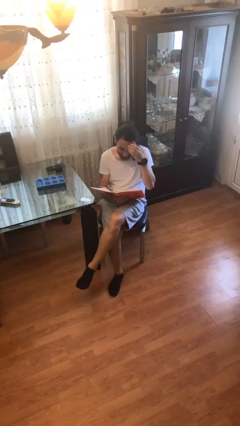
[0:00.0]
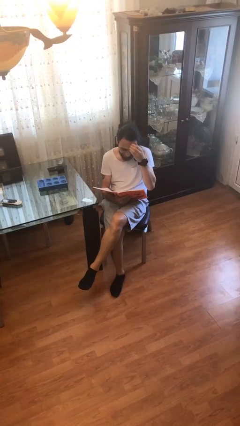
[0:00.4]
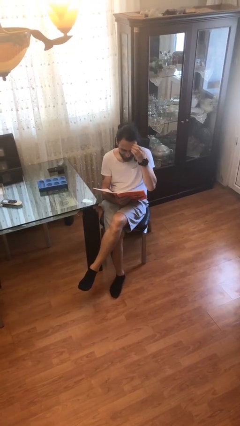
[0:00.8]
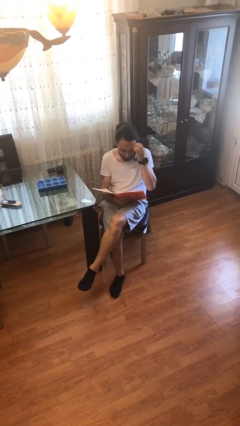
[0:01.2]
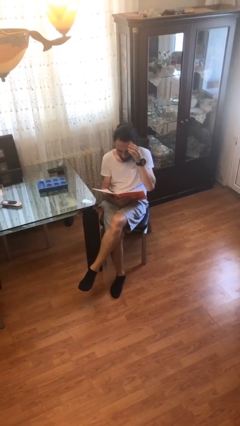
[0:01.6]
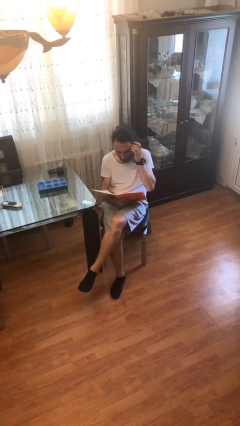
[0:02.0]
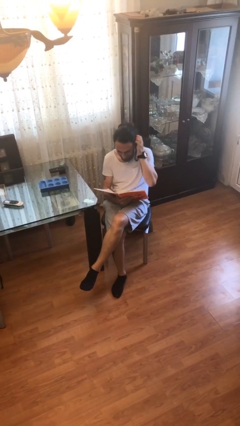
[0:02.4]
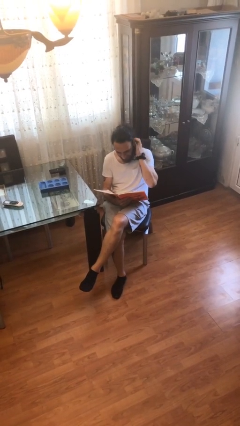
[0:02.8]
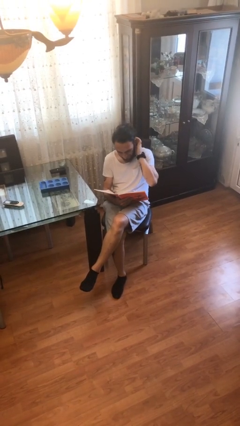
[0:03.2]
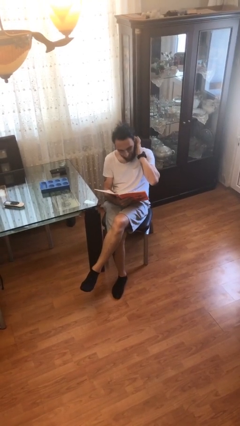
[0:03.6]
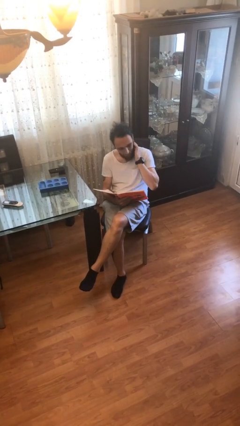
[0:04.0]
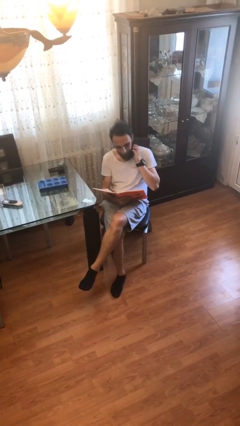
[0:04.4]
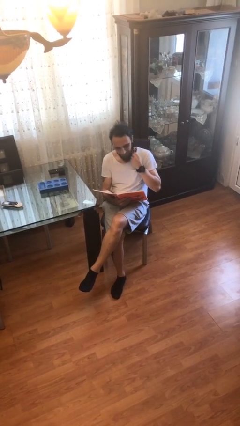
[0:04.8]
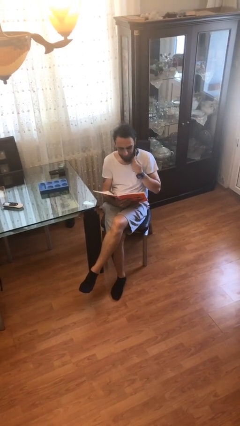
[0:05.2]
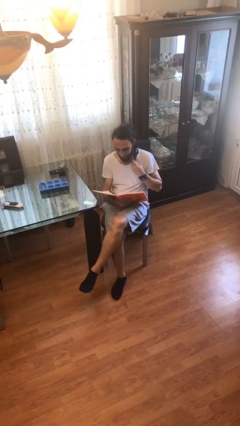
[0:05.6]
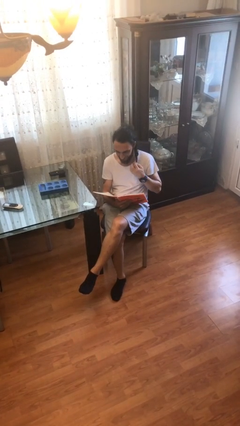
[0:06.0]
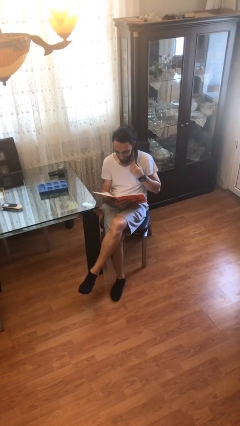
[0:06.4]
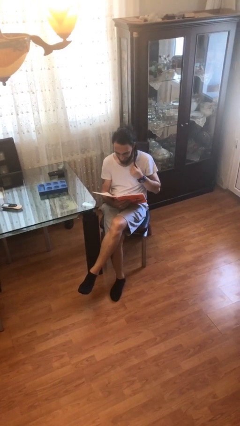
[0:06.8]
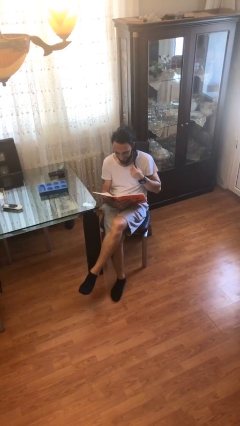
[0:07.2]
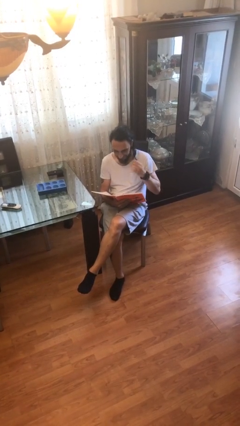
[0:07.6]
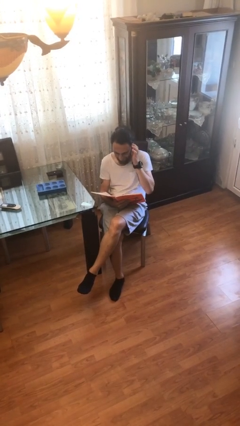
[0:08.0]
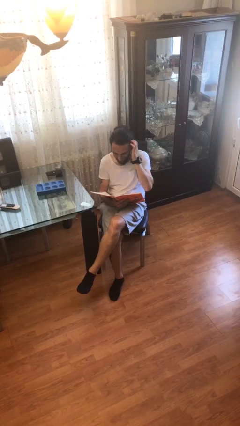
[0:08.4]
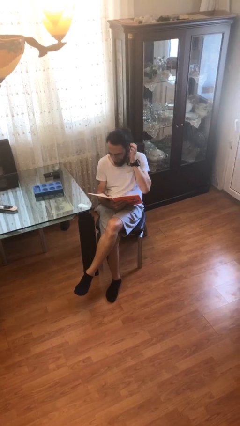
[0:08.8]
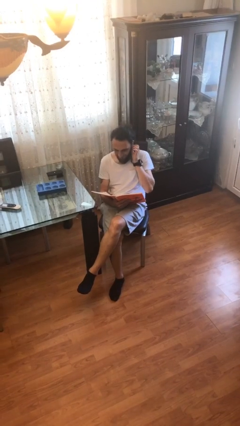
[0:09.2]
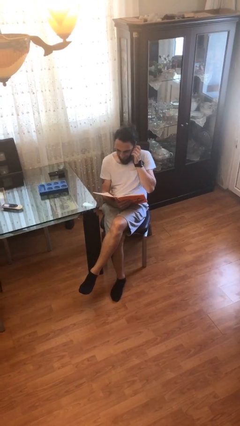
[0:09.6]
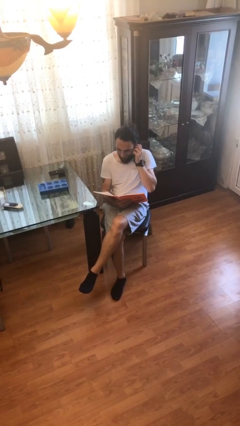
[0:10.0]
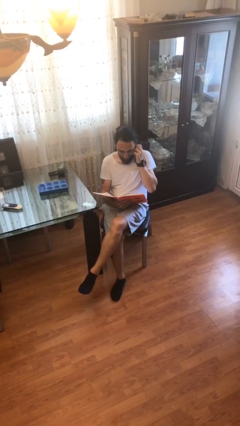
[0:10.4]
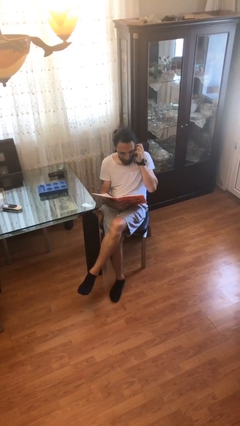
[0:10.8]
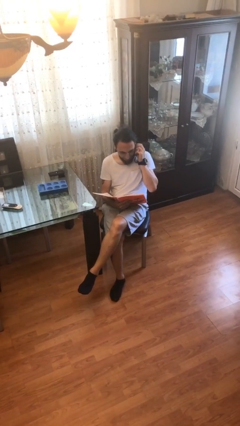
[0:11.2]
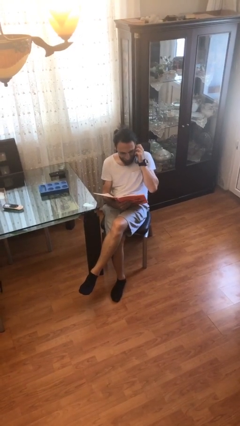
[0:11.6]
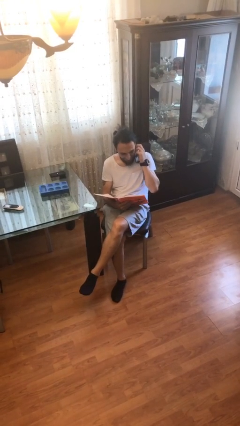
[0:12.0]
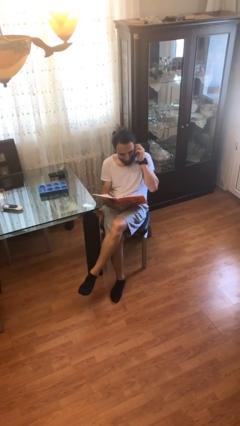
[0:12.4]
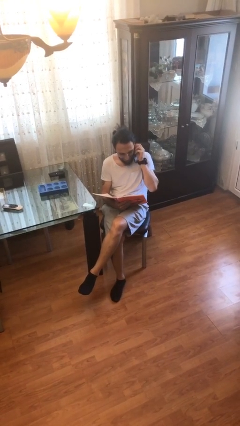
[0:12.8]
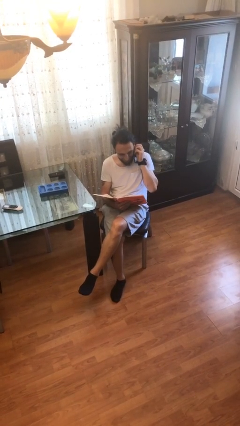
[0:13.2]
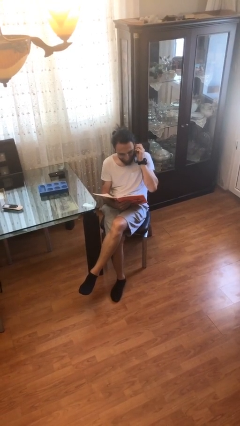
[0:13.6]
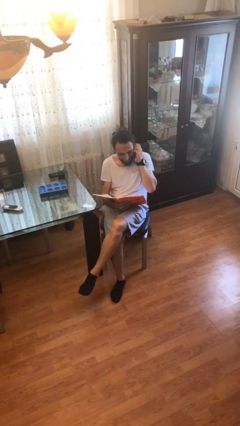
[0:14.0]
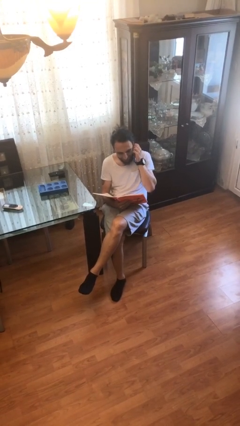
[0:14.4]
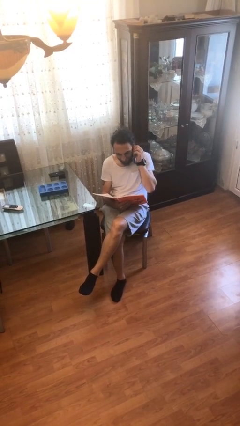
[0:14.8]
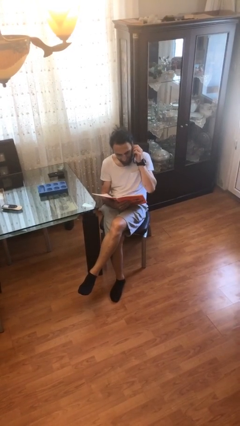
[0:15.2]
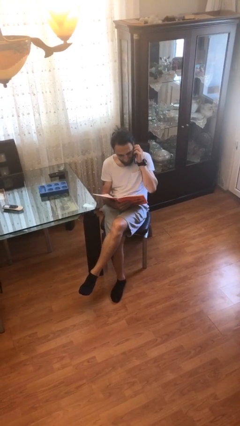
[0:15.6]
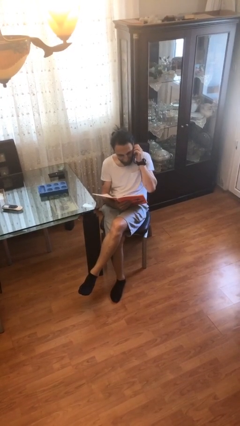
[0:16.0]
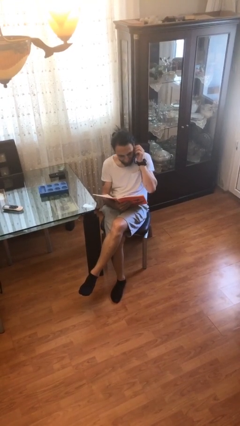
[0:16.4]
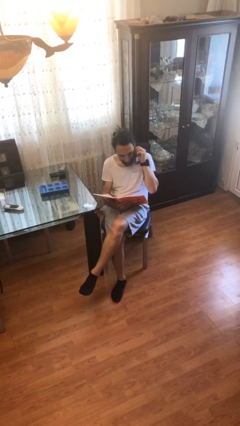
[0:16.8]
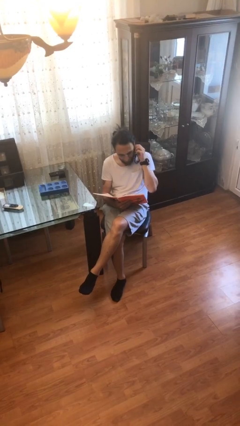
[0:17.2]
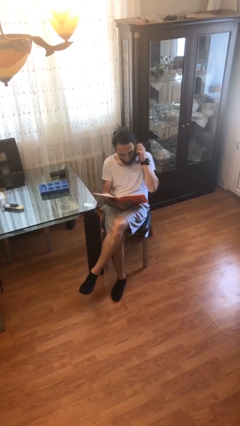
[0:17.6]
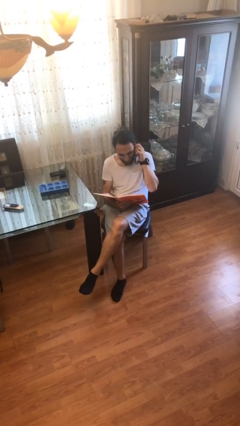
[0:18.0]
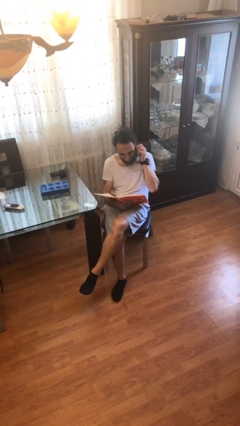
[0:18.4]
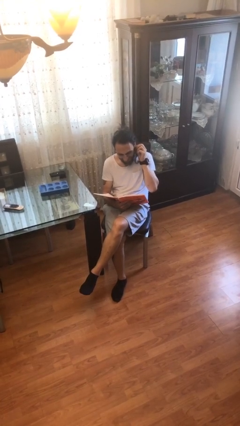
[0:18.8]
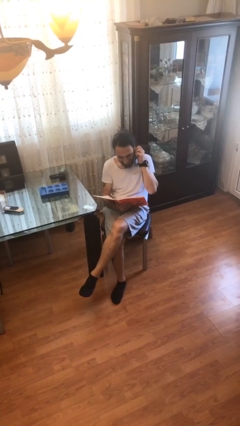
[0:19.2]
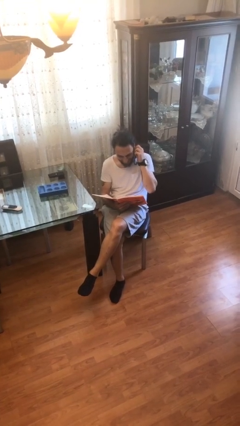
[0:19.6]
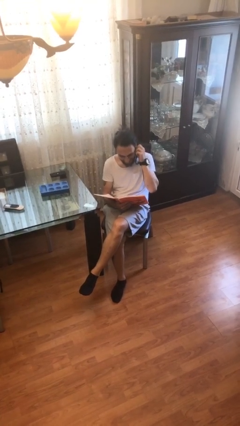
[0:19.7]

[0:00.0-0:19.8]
person reads document

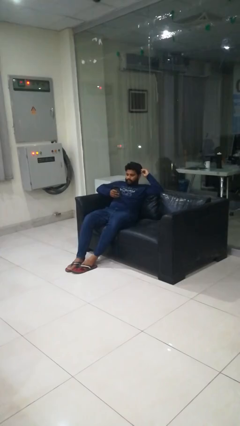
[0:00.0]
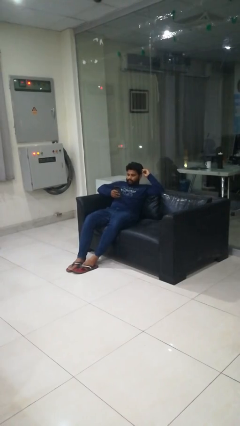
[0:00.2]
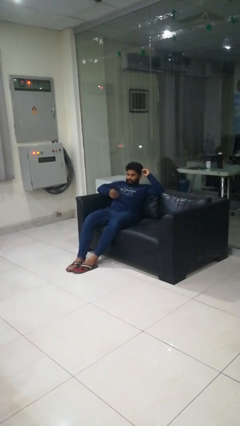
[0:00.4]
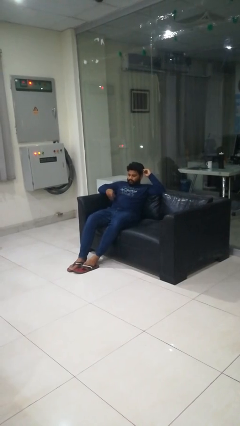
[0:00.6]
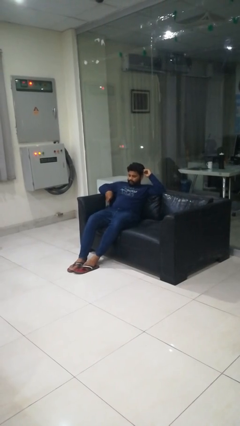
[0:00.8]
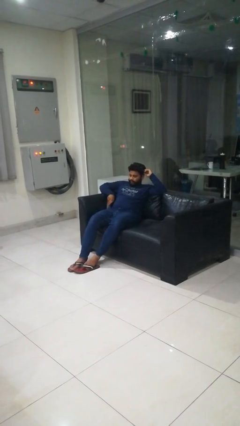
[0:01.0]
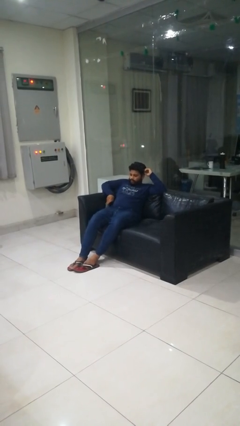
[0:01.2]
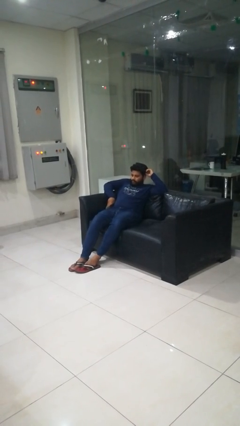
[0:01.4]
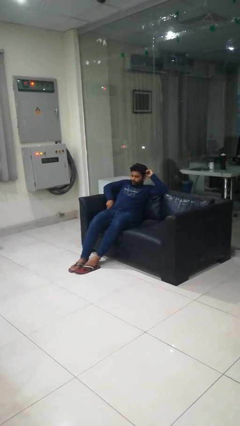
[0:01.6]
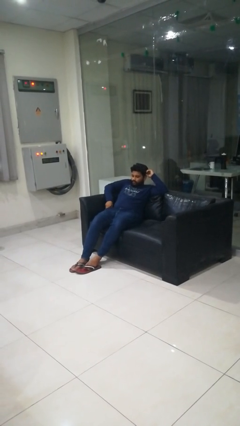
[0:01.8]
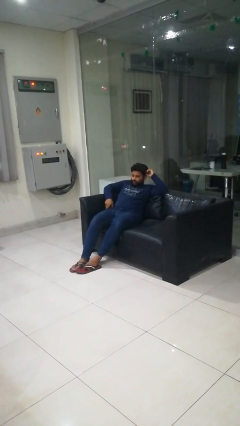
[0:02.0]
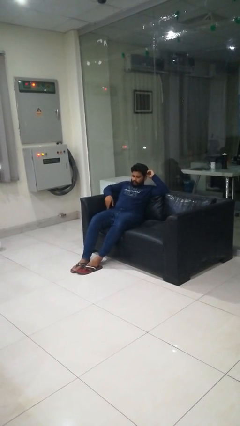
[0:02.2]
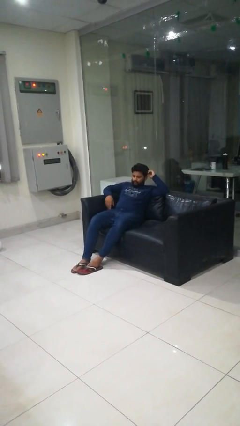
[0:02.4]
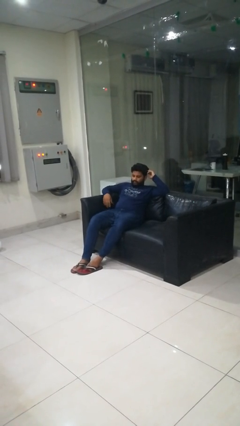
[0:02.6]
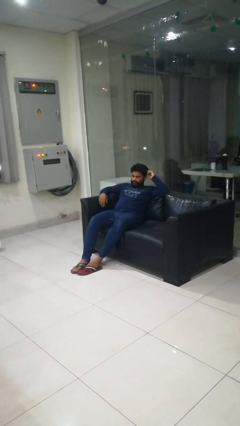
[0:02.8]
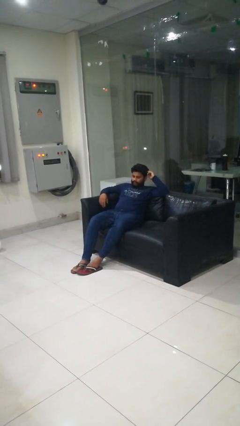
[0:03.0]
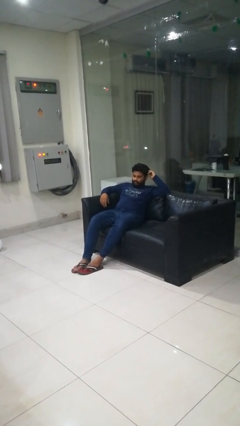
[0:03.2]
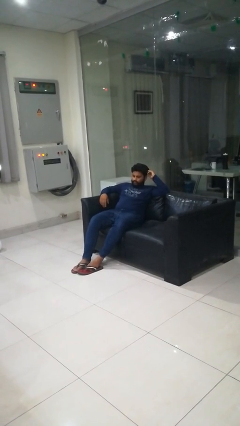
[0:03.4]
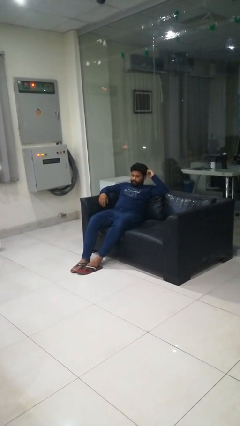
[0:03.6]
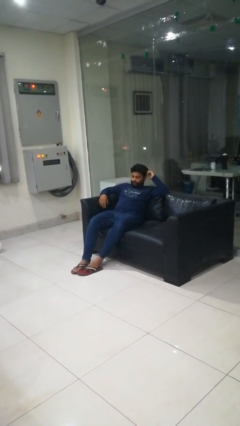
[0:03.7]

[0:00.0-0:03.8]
person puts phone into pocket

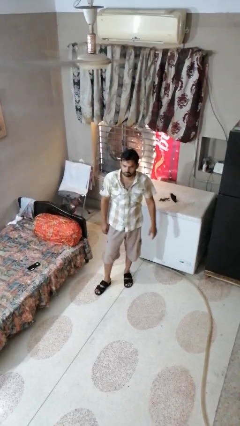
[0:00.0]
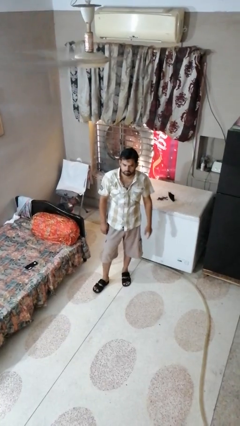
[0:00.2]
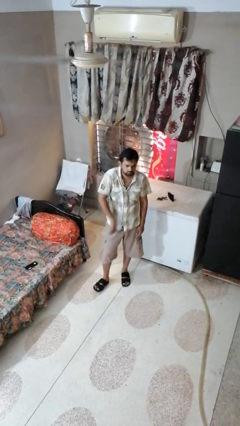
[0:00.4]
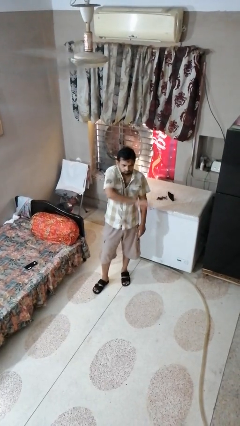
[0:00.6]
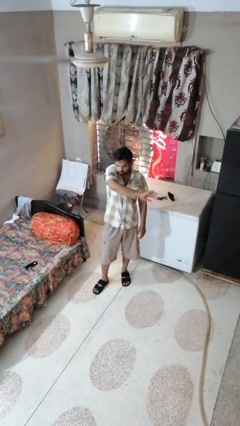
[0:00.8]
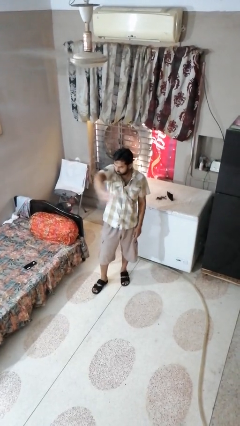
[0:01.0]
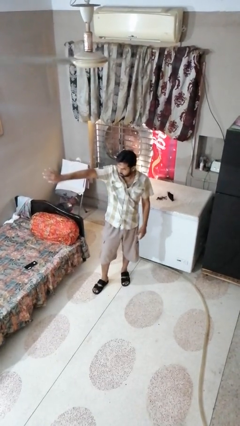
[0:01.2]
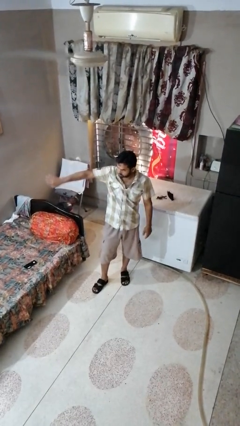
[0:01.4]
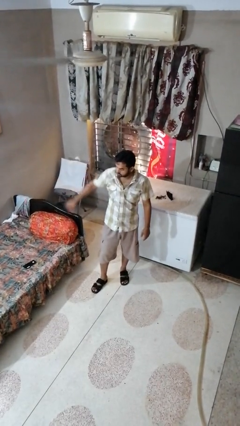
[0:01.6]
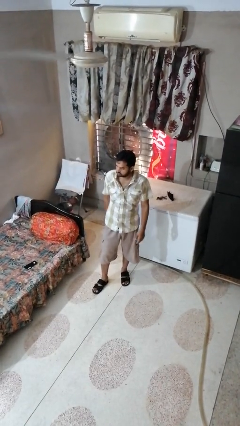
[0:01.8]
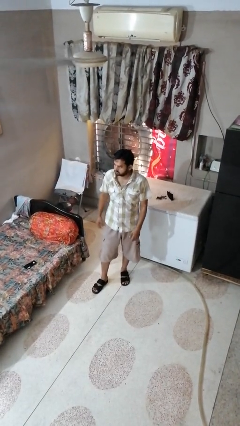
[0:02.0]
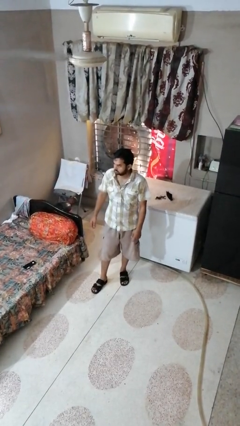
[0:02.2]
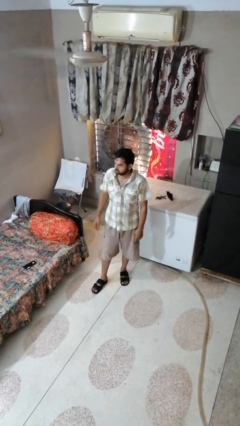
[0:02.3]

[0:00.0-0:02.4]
person gestures swipe right

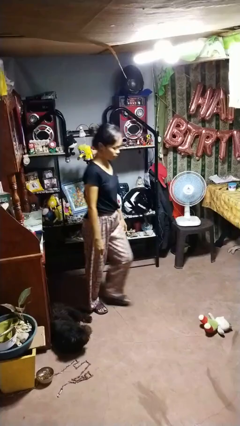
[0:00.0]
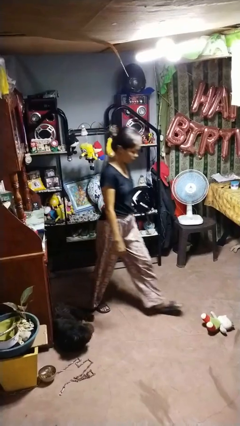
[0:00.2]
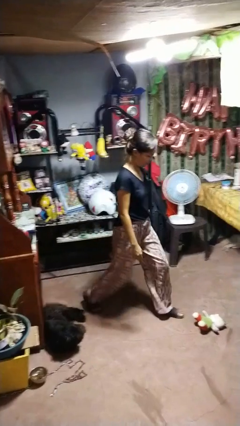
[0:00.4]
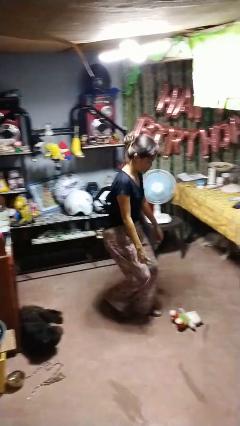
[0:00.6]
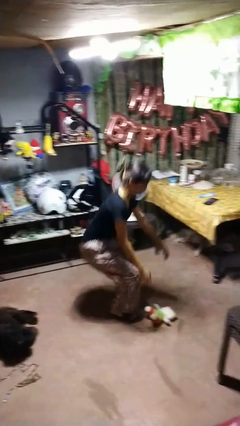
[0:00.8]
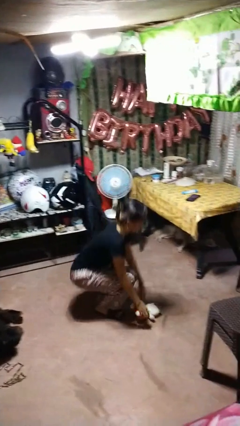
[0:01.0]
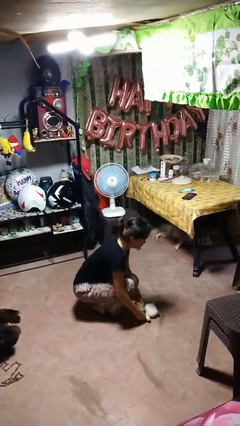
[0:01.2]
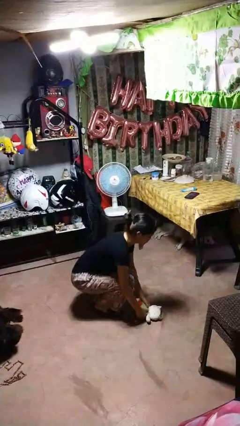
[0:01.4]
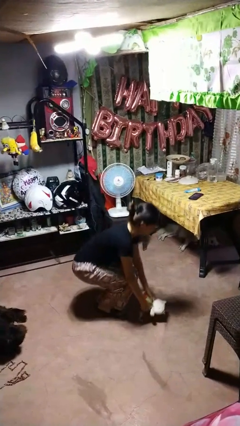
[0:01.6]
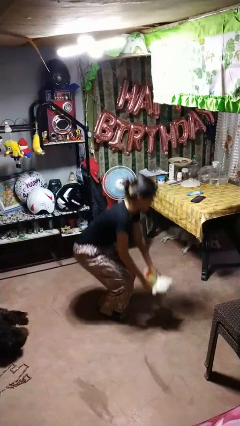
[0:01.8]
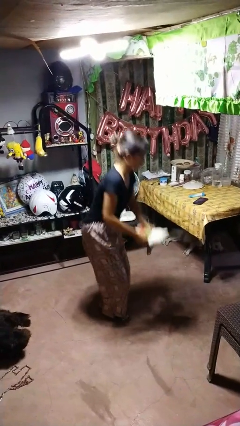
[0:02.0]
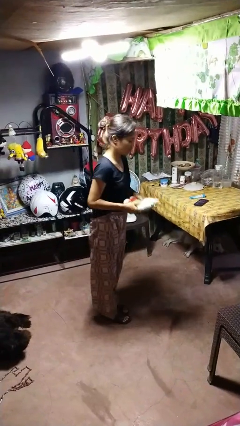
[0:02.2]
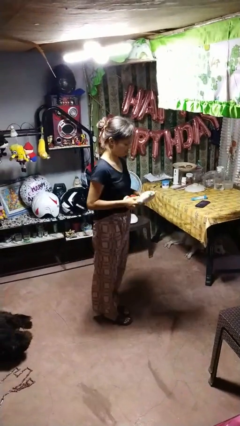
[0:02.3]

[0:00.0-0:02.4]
person picks up object from floor
